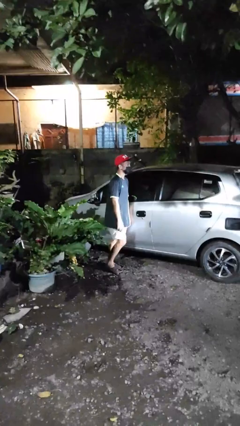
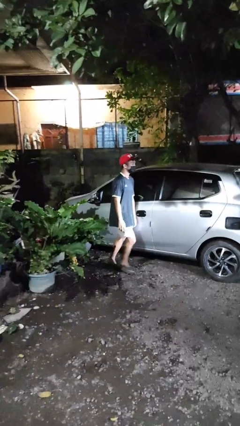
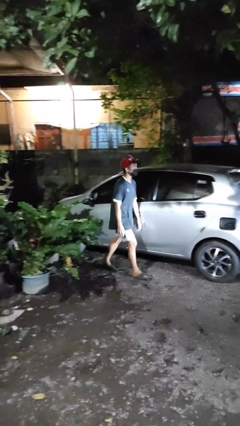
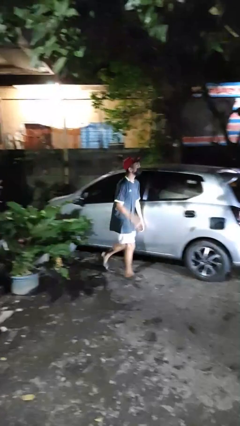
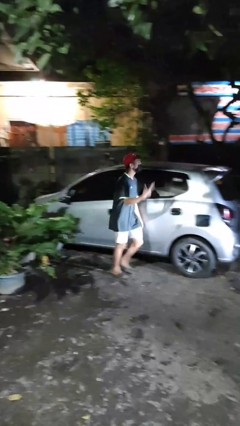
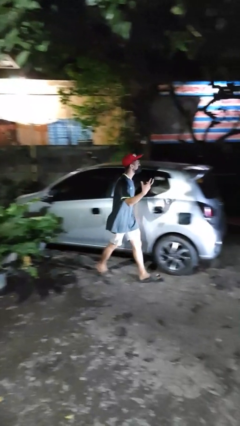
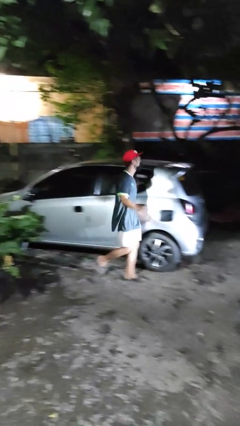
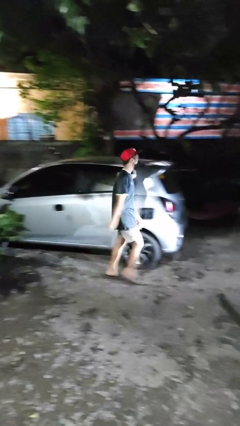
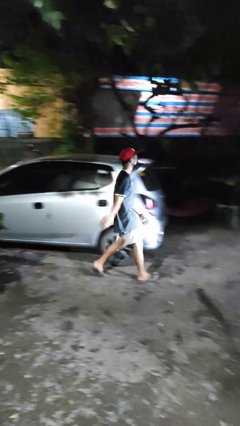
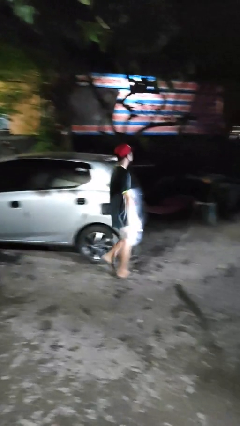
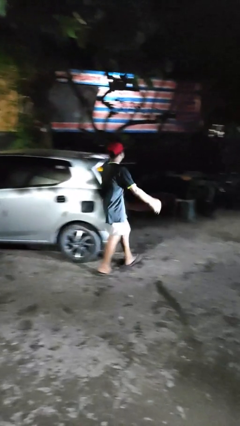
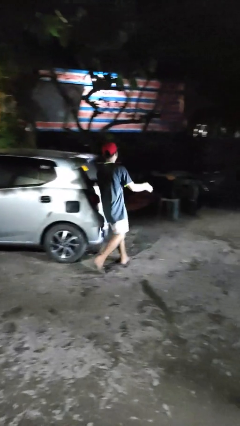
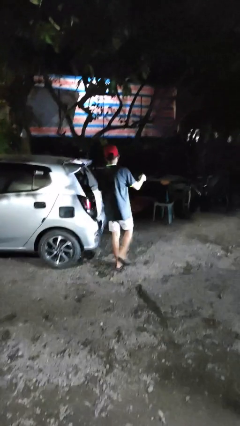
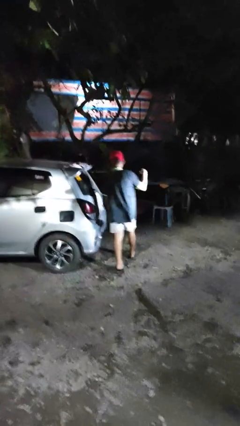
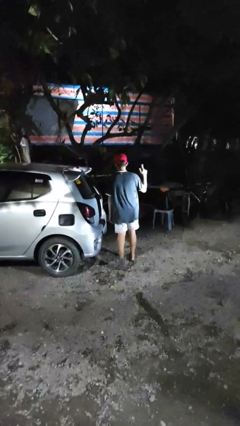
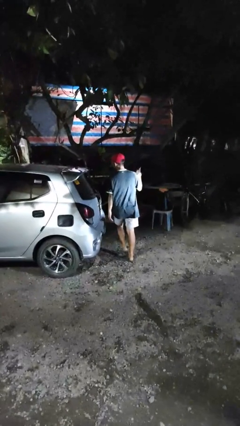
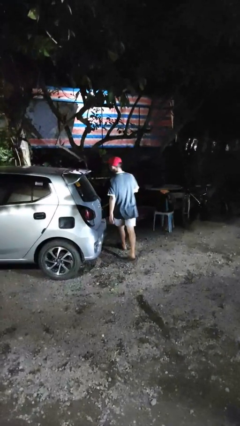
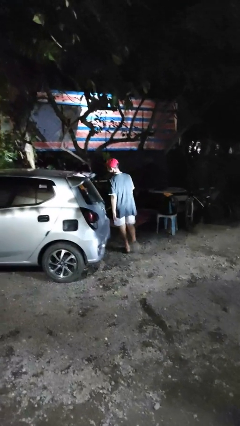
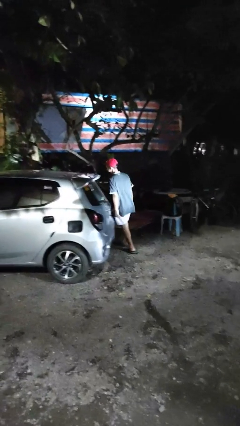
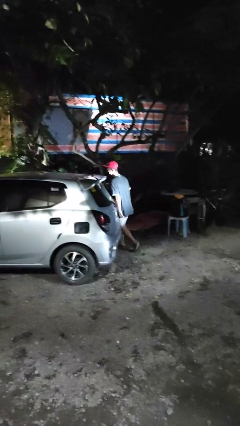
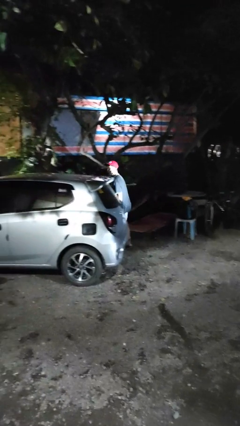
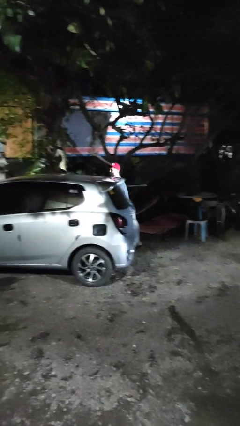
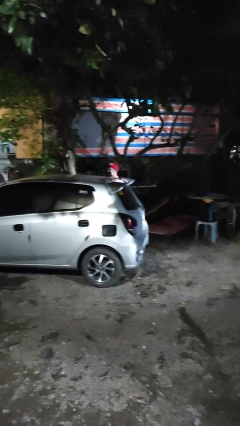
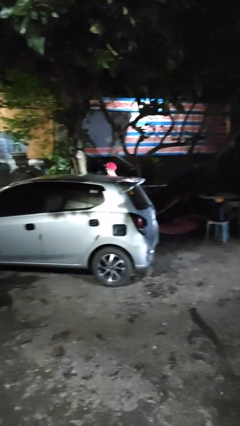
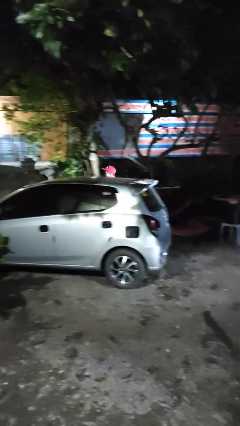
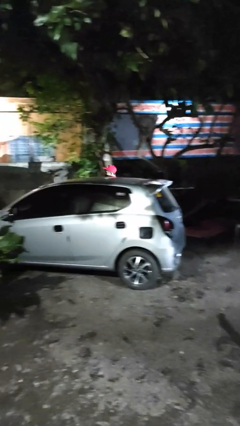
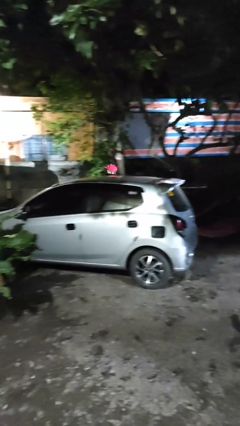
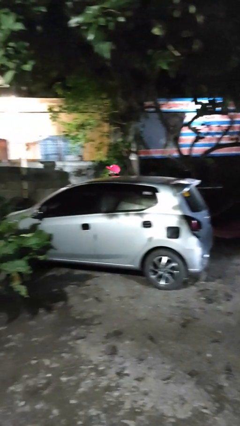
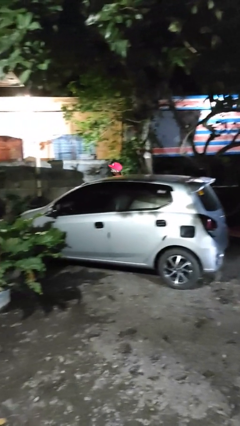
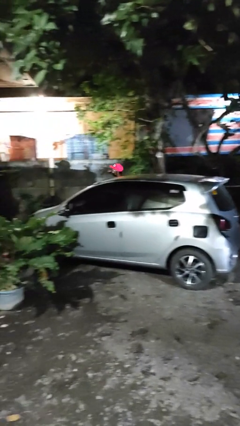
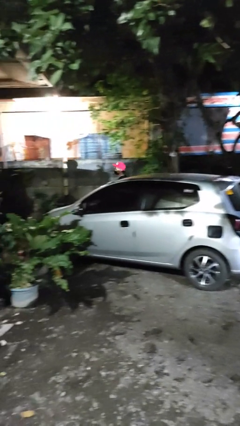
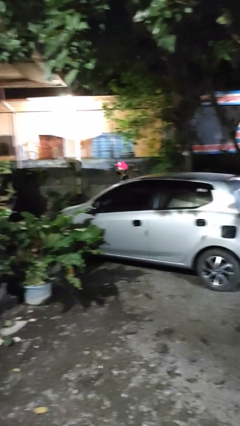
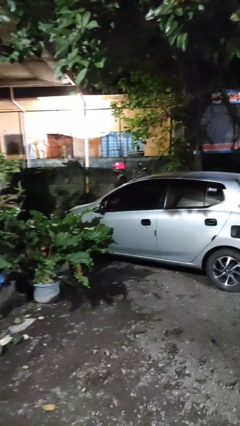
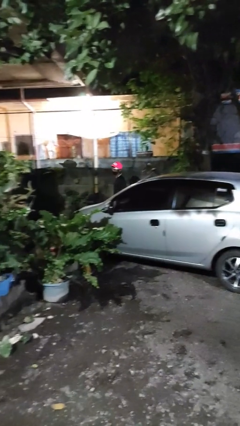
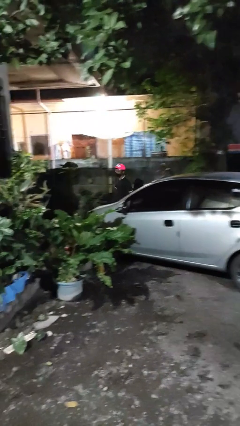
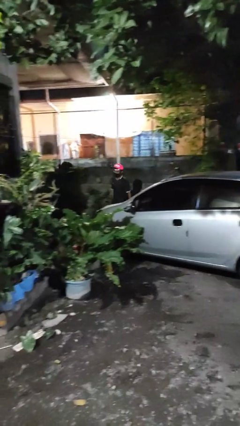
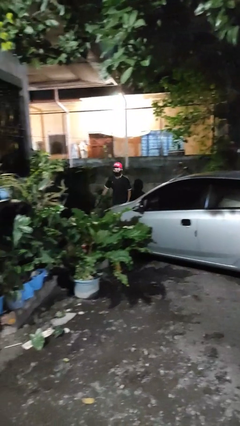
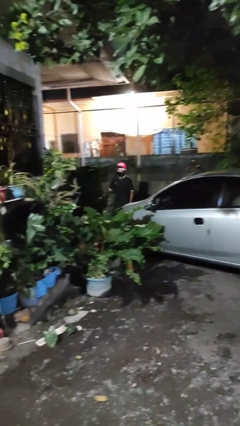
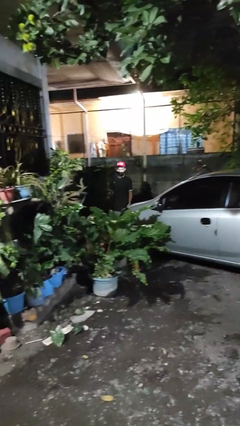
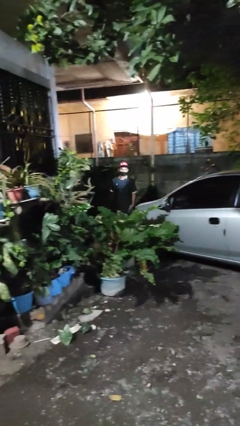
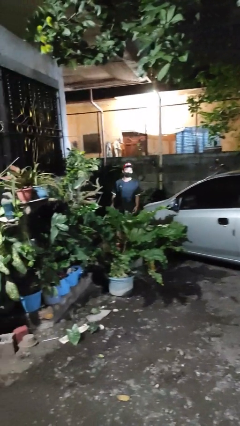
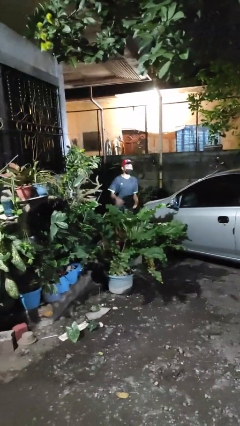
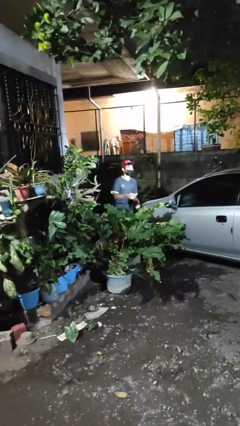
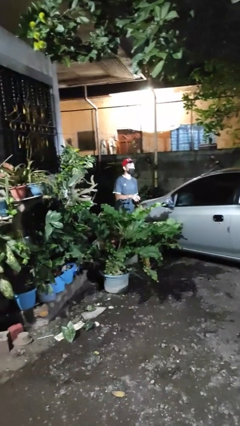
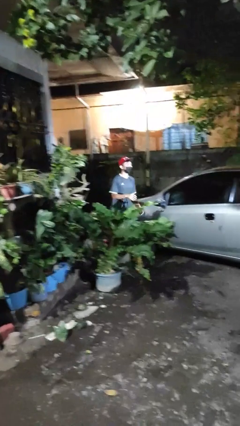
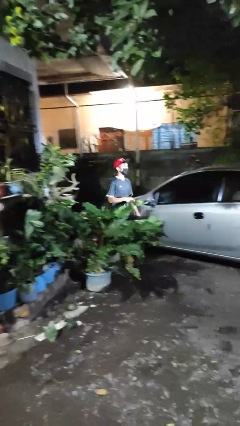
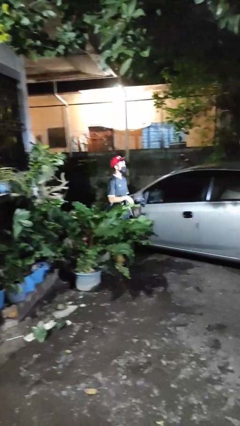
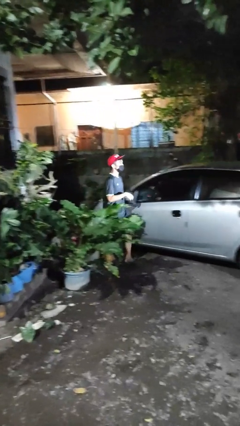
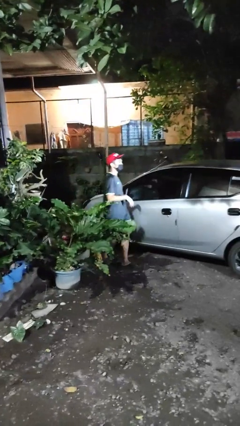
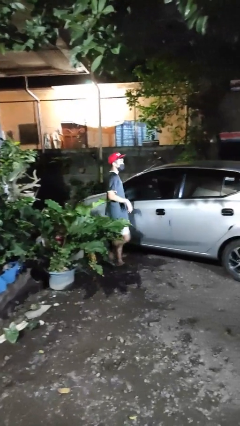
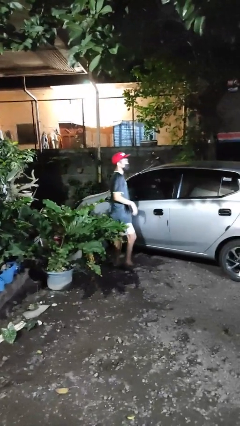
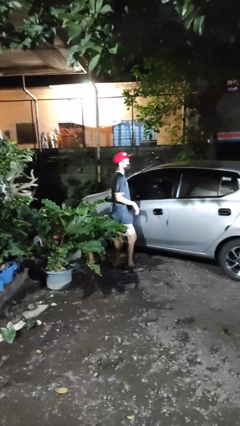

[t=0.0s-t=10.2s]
person walks around car

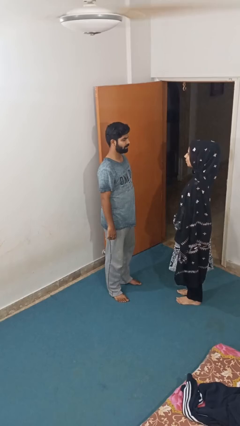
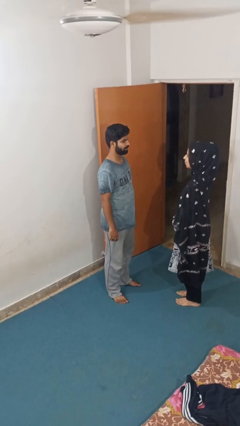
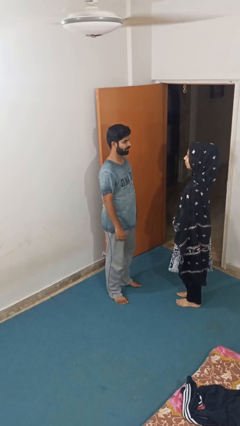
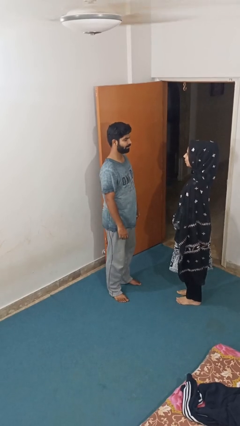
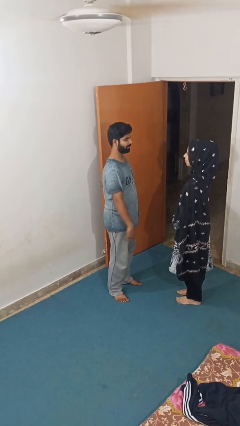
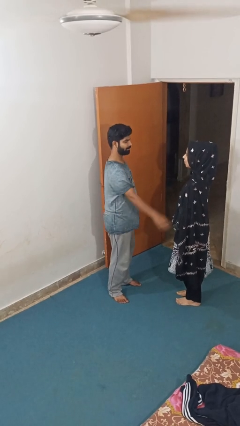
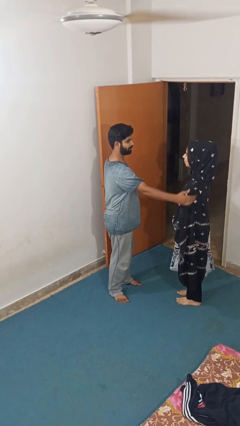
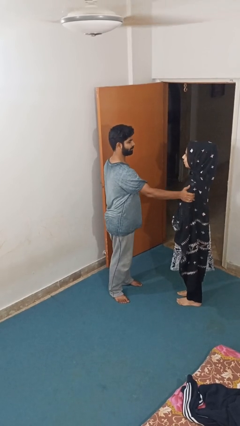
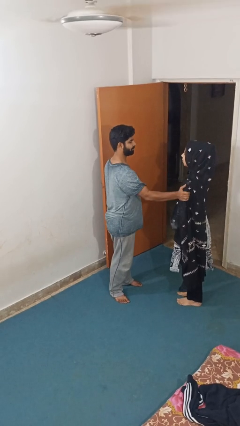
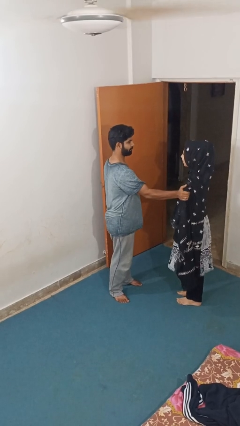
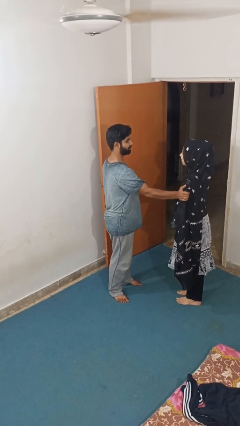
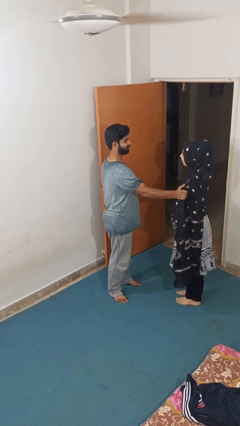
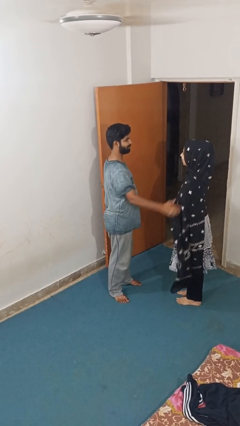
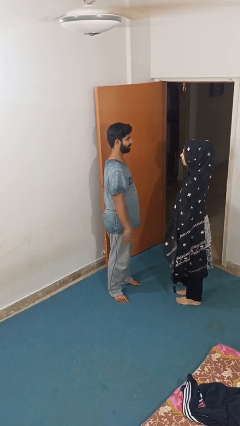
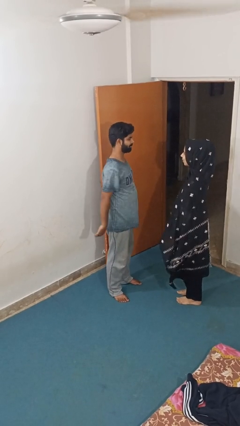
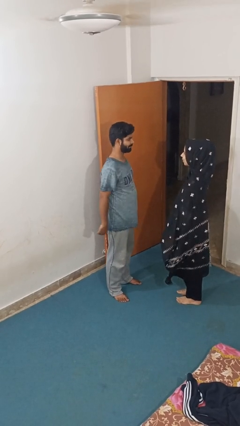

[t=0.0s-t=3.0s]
person grabs person by bicep

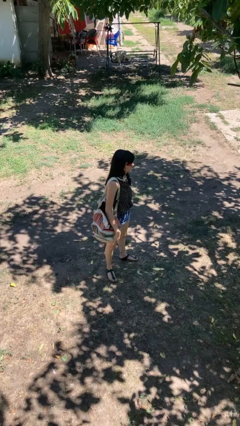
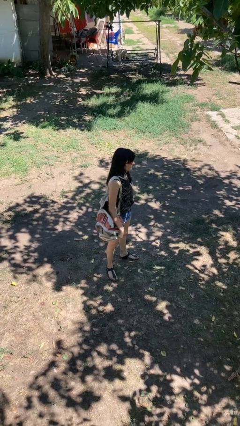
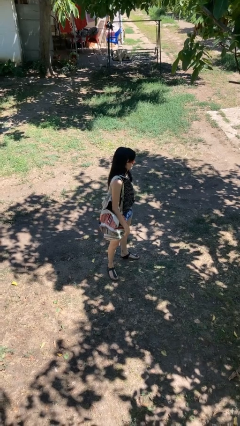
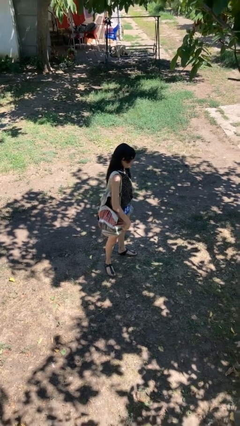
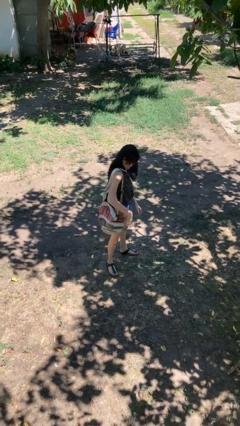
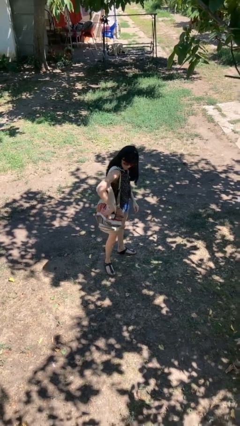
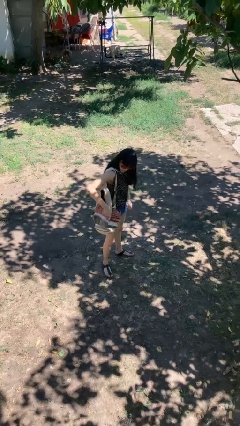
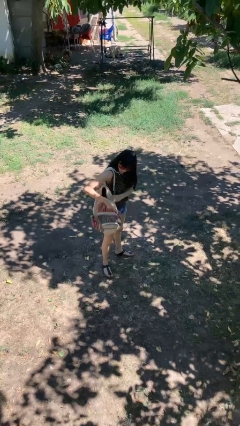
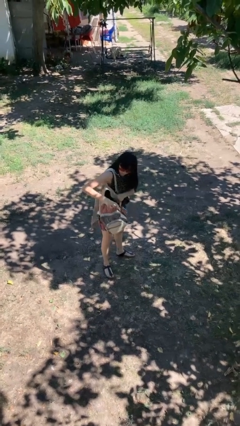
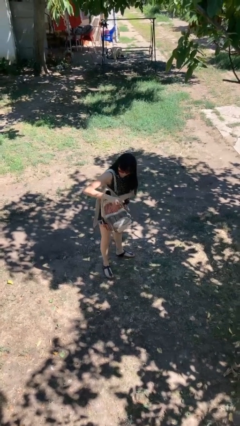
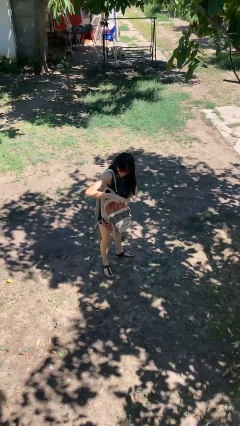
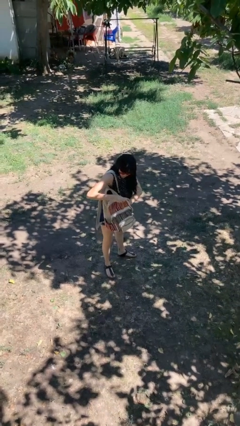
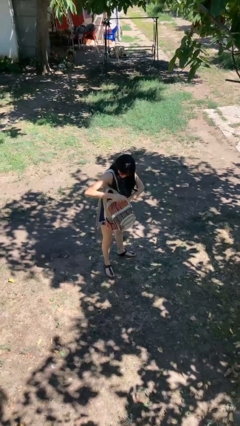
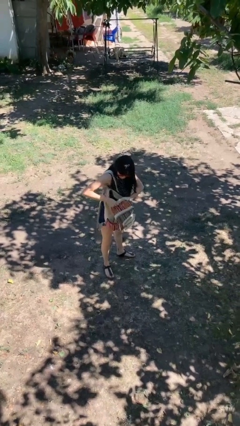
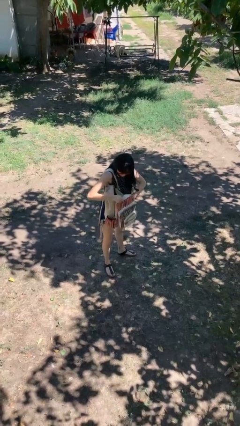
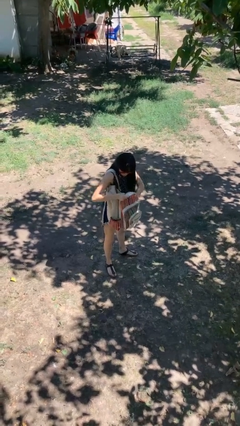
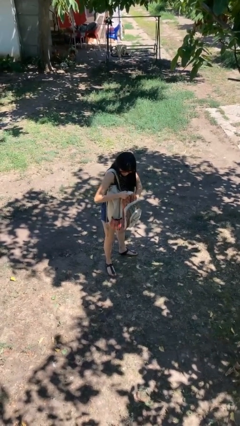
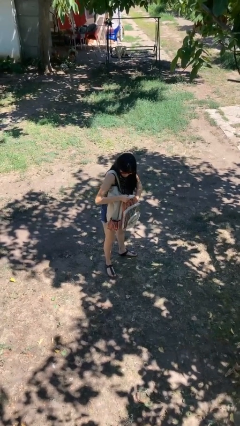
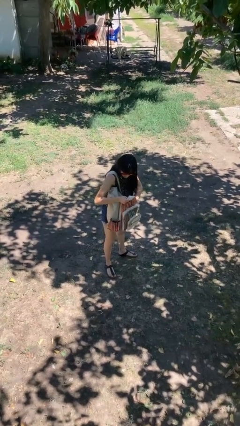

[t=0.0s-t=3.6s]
person searches in backpack

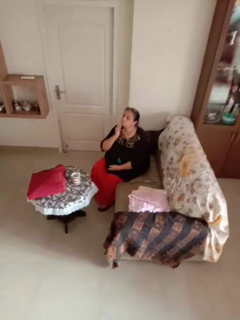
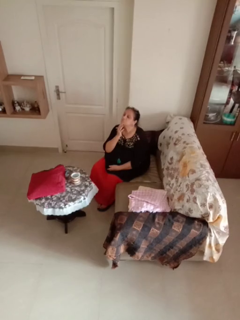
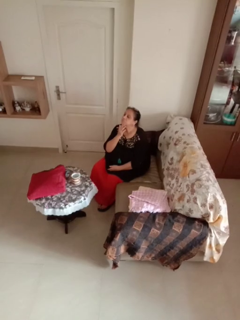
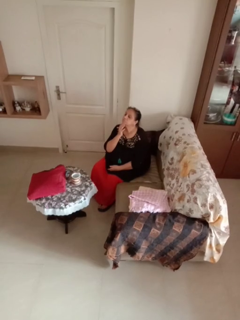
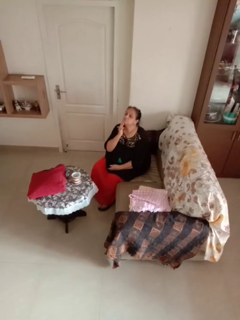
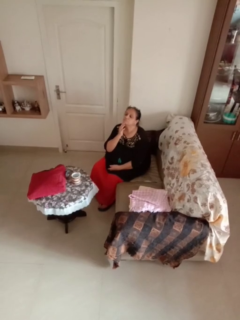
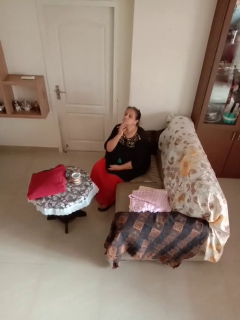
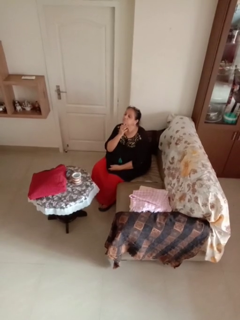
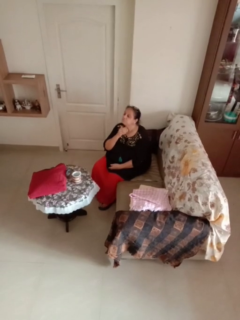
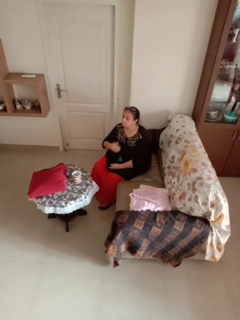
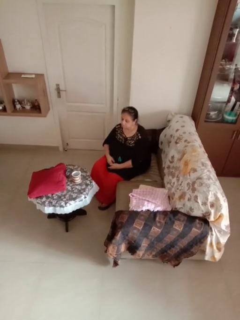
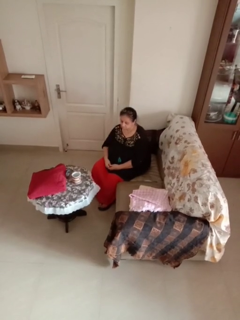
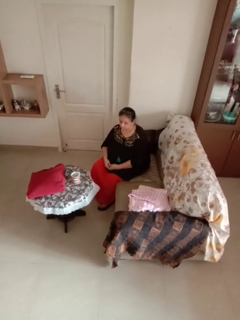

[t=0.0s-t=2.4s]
person strokes chin
